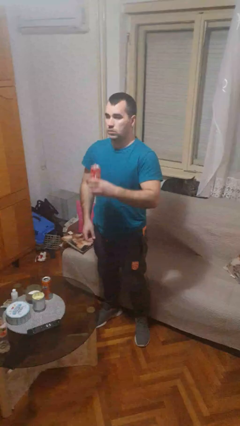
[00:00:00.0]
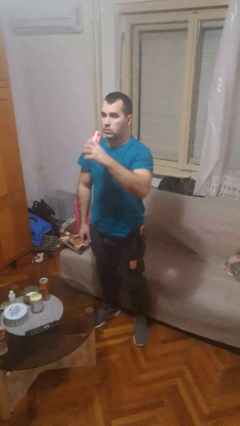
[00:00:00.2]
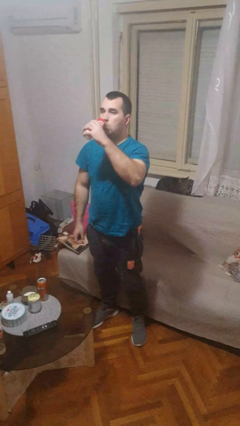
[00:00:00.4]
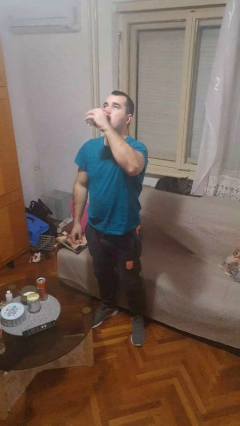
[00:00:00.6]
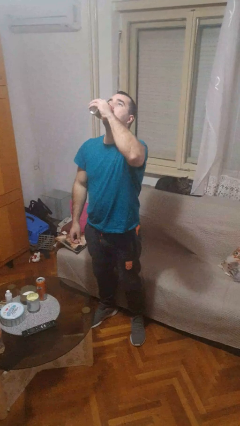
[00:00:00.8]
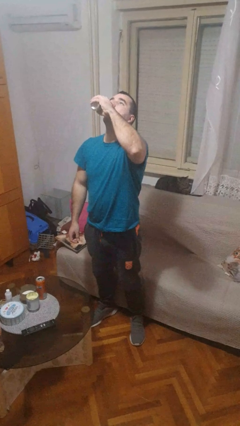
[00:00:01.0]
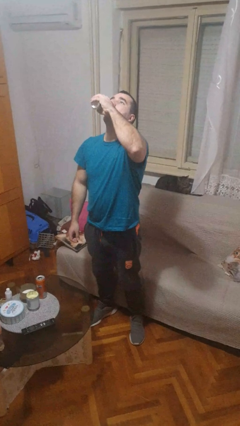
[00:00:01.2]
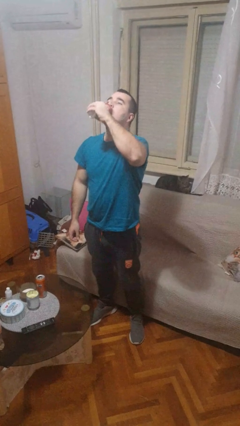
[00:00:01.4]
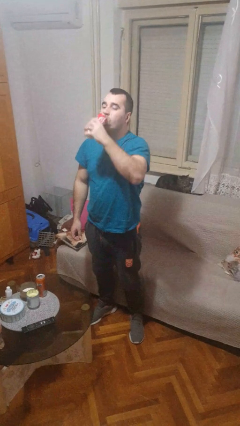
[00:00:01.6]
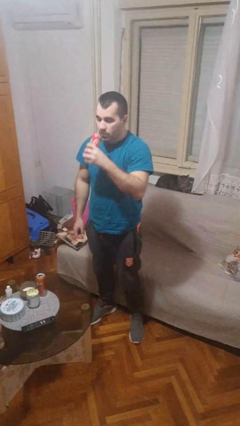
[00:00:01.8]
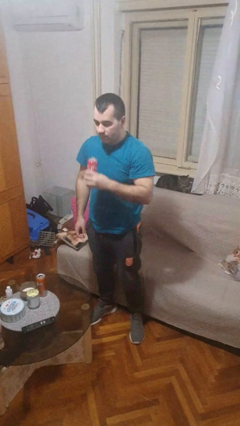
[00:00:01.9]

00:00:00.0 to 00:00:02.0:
person drinks from beverage can

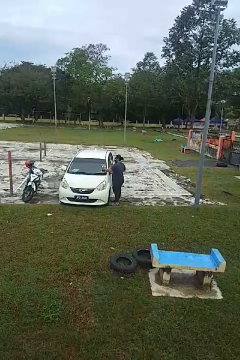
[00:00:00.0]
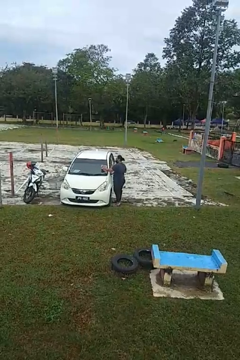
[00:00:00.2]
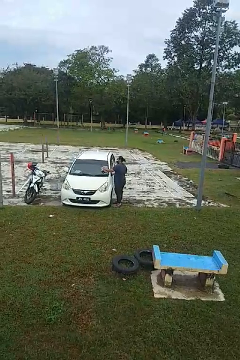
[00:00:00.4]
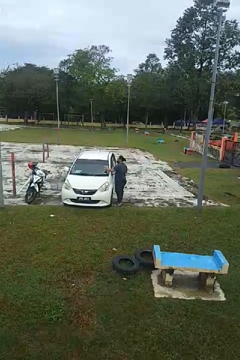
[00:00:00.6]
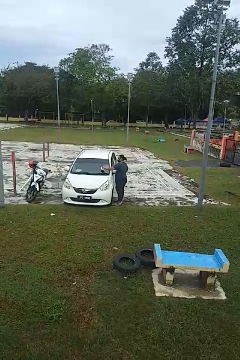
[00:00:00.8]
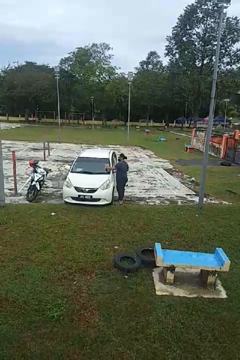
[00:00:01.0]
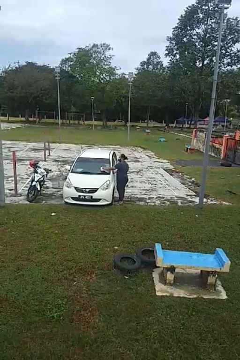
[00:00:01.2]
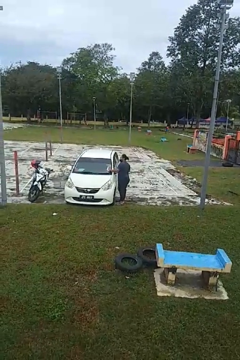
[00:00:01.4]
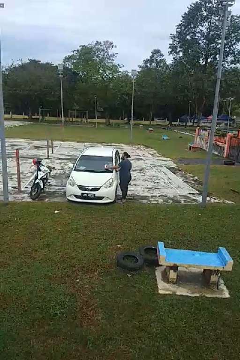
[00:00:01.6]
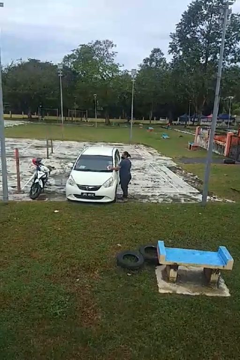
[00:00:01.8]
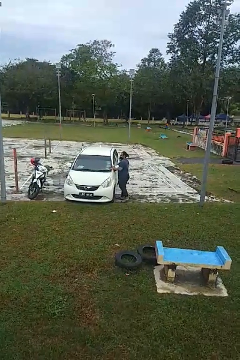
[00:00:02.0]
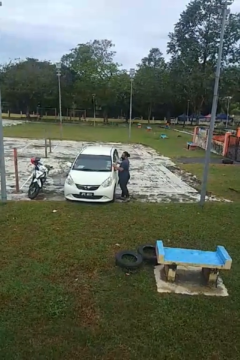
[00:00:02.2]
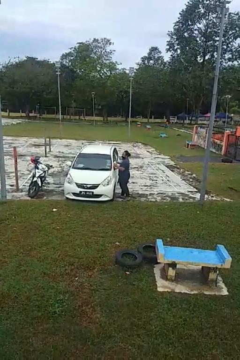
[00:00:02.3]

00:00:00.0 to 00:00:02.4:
person polishes car with rag

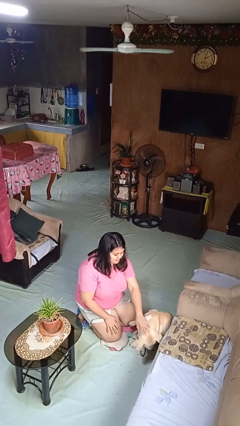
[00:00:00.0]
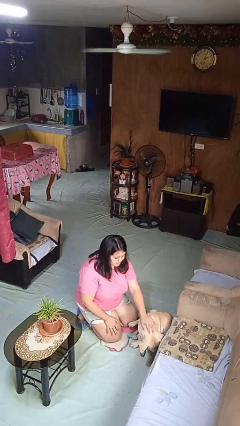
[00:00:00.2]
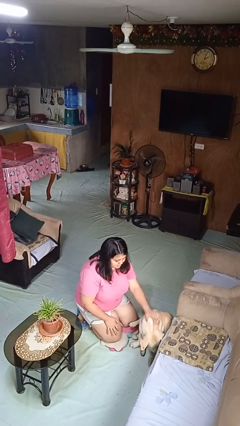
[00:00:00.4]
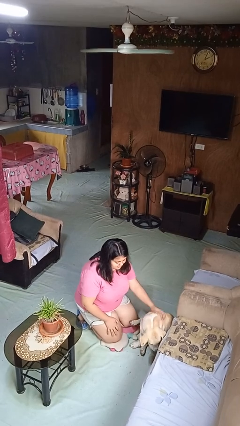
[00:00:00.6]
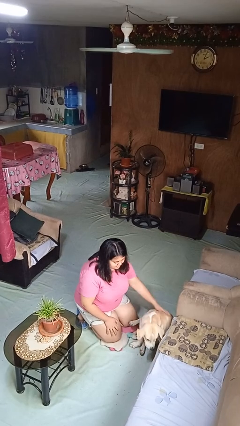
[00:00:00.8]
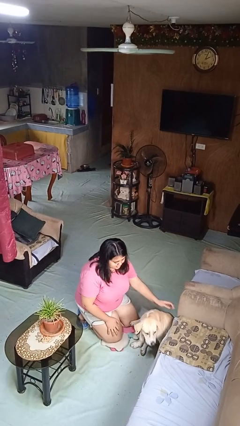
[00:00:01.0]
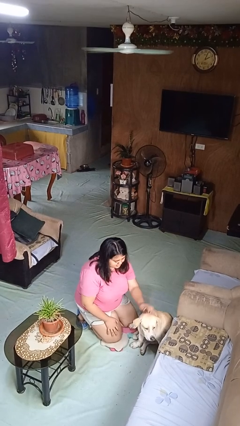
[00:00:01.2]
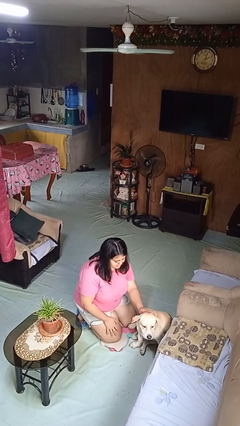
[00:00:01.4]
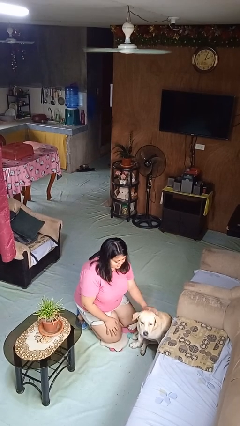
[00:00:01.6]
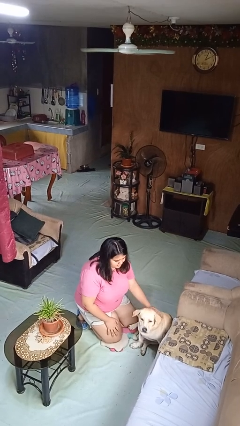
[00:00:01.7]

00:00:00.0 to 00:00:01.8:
person pets dog

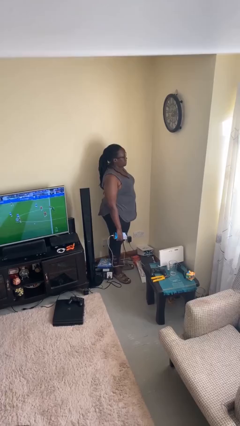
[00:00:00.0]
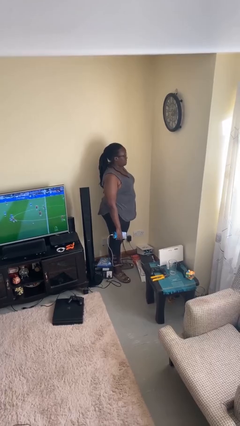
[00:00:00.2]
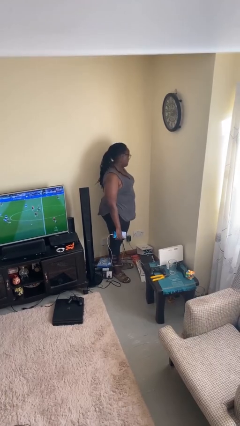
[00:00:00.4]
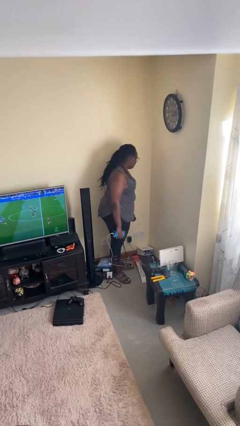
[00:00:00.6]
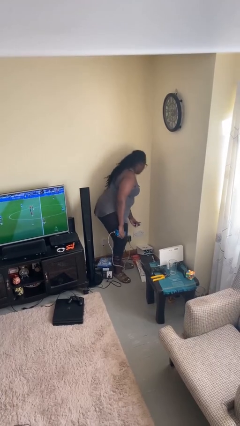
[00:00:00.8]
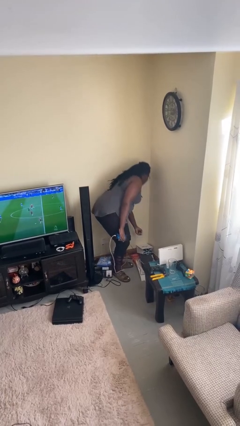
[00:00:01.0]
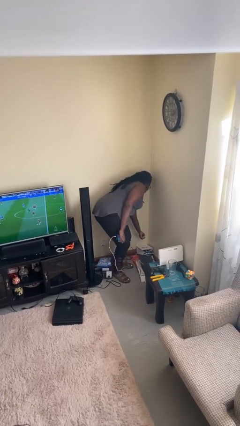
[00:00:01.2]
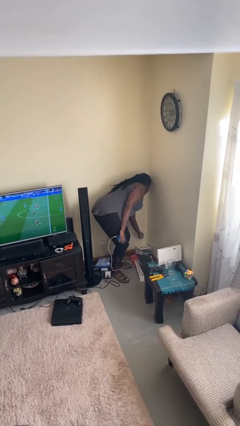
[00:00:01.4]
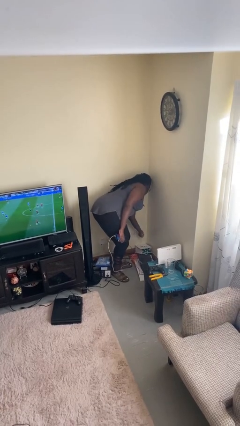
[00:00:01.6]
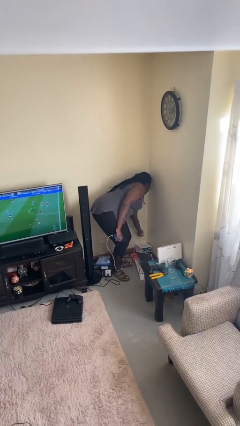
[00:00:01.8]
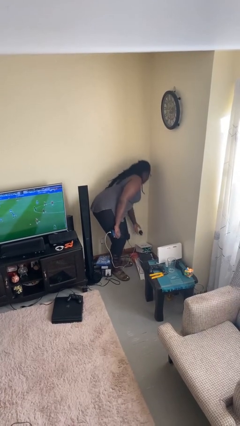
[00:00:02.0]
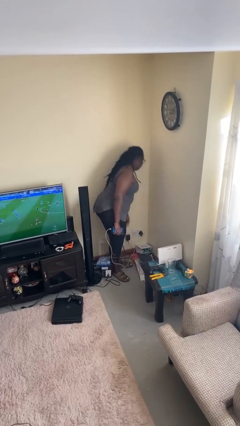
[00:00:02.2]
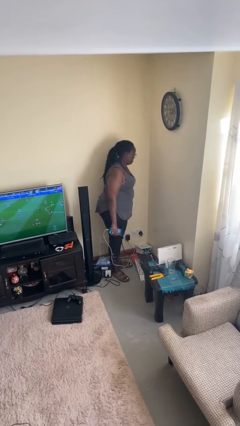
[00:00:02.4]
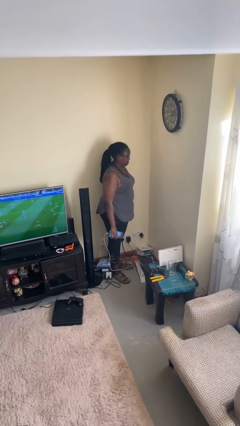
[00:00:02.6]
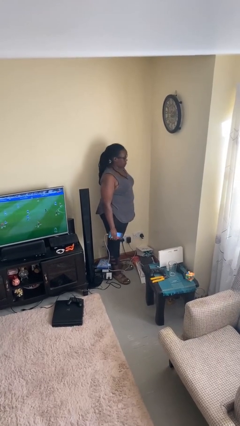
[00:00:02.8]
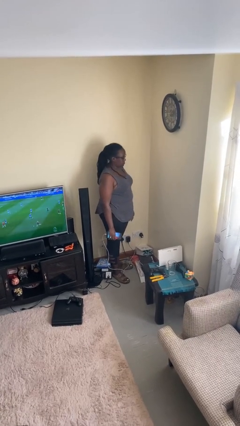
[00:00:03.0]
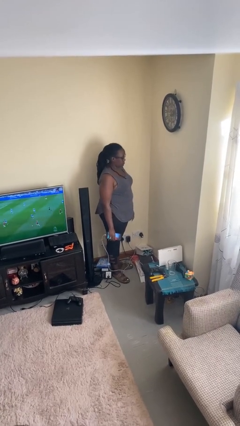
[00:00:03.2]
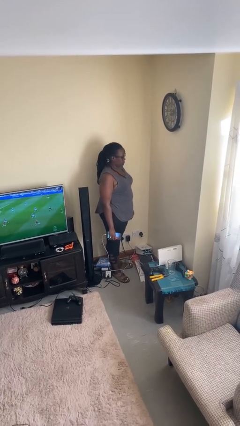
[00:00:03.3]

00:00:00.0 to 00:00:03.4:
person plugs into electrical socket

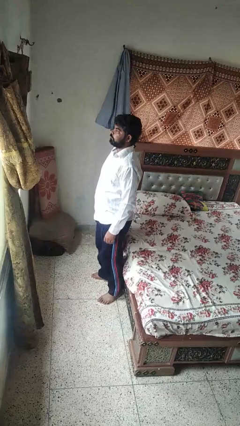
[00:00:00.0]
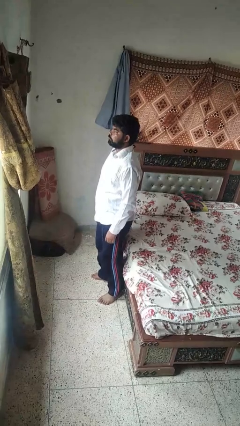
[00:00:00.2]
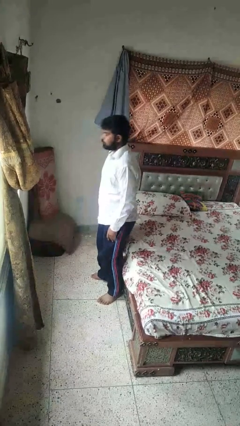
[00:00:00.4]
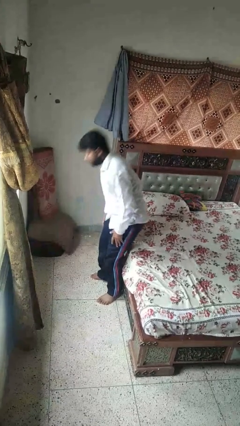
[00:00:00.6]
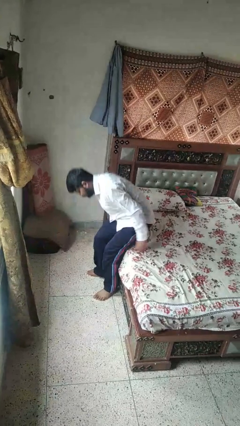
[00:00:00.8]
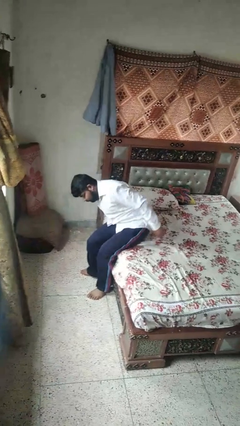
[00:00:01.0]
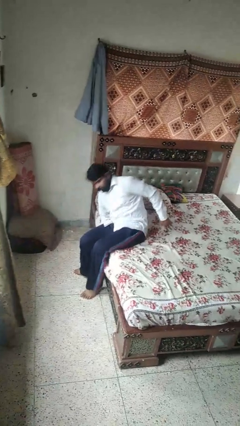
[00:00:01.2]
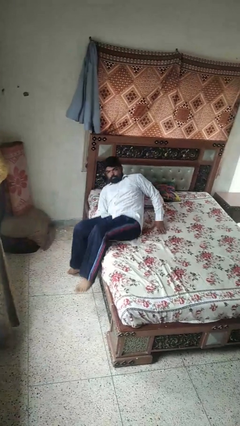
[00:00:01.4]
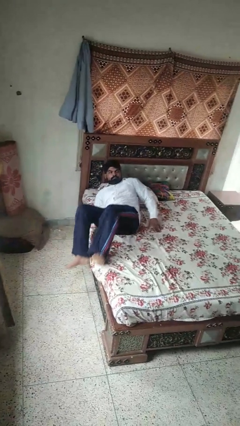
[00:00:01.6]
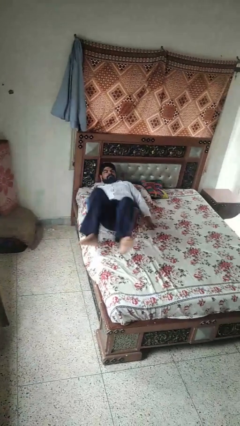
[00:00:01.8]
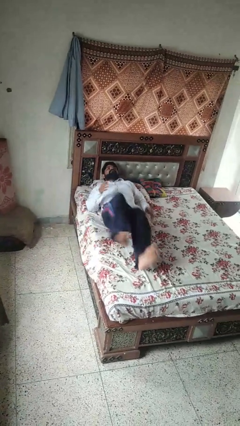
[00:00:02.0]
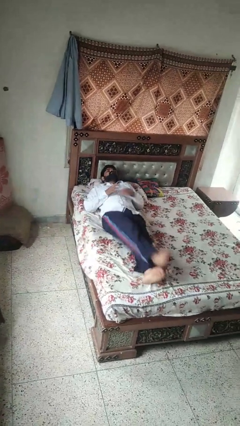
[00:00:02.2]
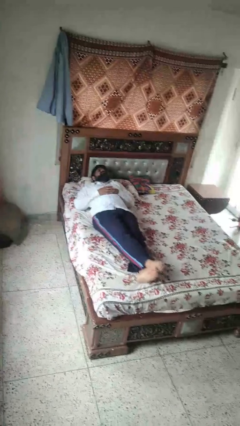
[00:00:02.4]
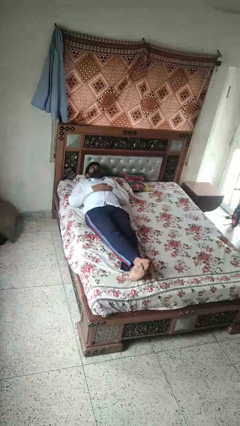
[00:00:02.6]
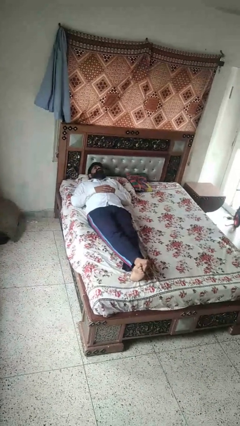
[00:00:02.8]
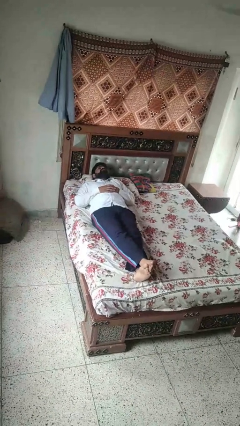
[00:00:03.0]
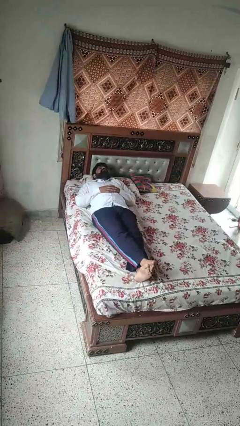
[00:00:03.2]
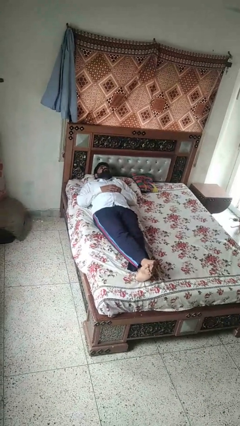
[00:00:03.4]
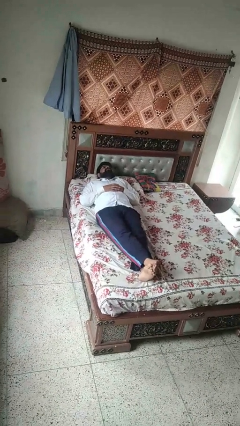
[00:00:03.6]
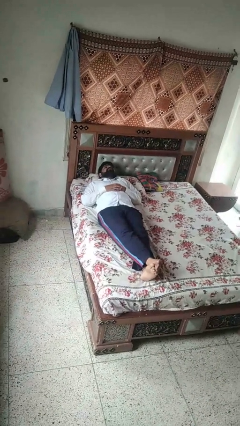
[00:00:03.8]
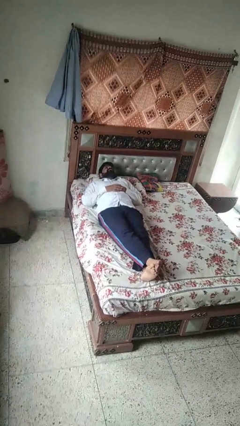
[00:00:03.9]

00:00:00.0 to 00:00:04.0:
person lies down on bed

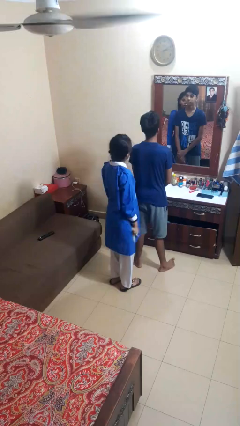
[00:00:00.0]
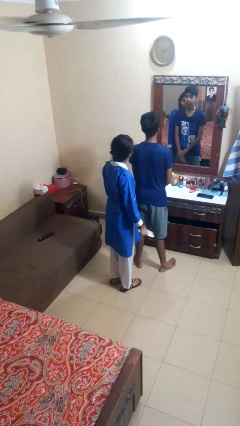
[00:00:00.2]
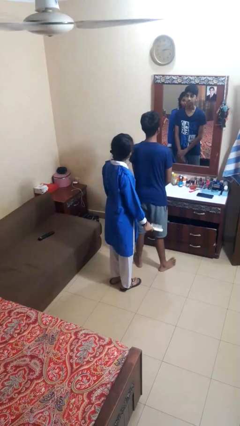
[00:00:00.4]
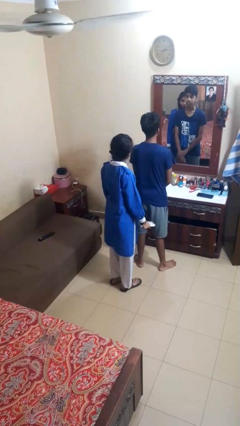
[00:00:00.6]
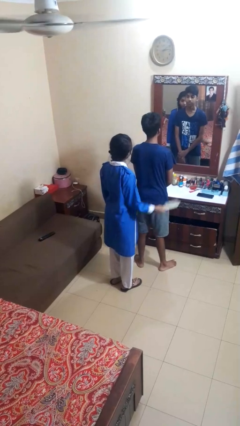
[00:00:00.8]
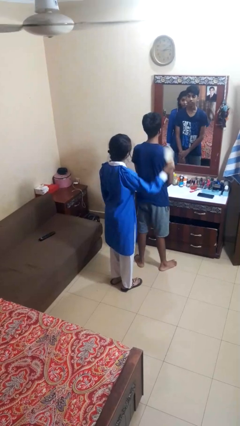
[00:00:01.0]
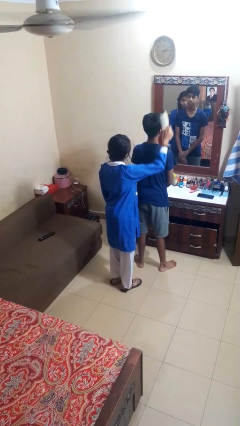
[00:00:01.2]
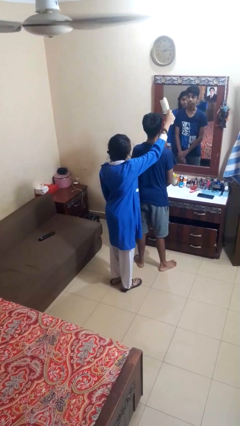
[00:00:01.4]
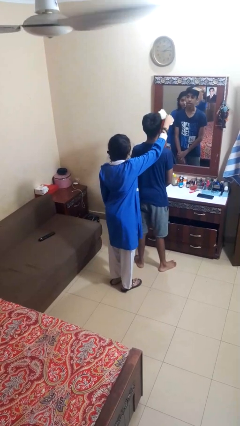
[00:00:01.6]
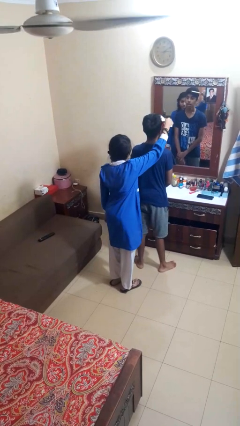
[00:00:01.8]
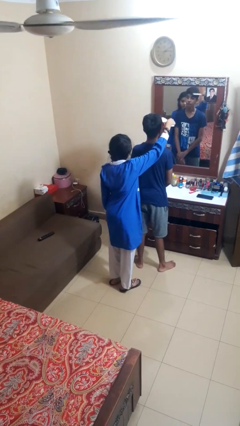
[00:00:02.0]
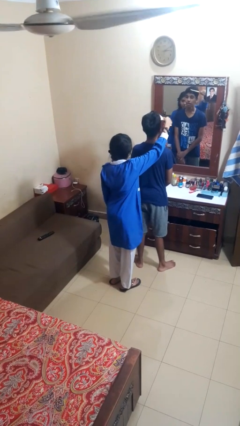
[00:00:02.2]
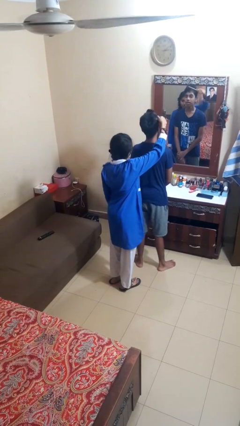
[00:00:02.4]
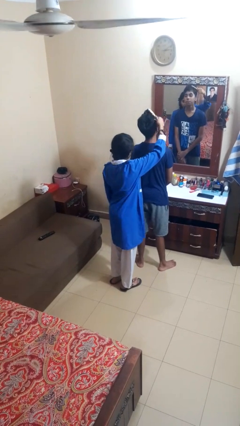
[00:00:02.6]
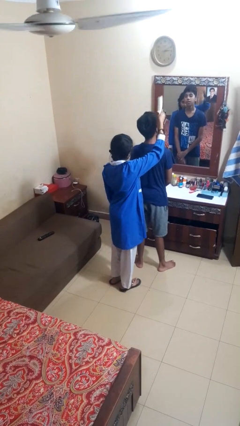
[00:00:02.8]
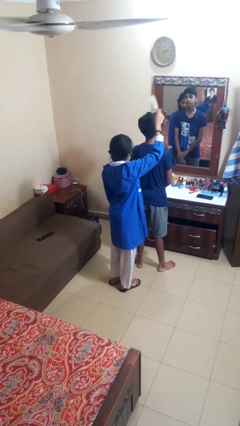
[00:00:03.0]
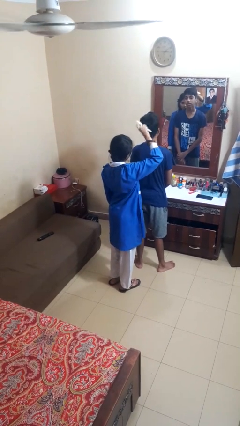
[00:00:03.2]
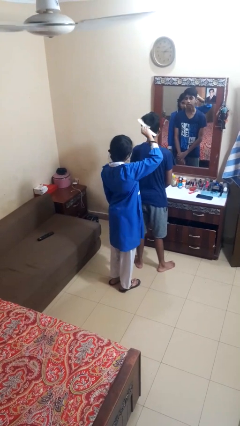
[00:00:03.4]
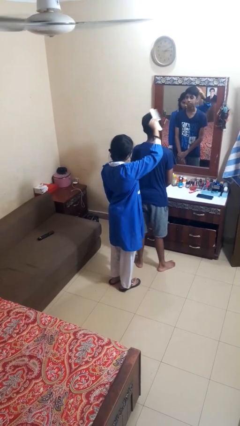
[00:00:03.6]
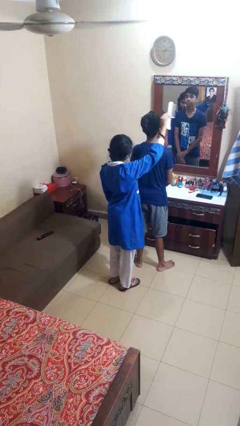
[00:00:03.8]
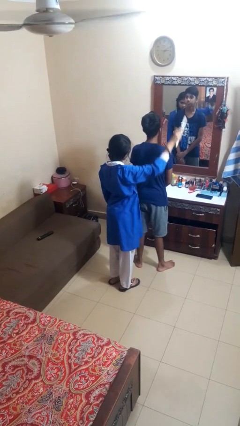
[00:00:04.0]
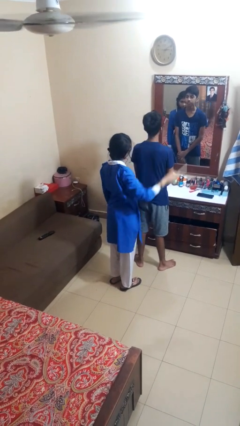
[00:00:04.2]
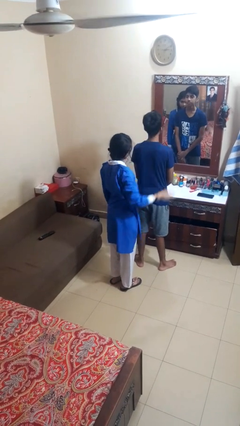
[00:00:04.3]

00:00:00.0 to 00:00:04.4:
person brushes hair of person
